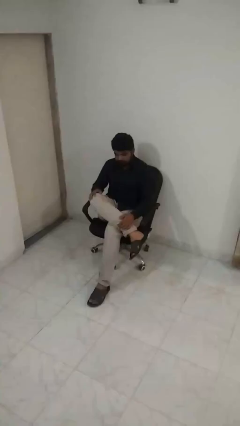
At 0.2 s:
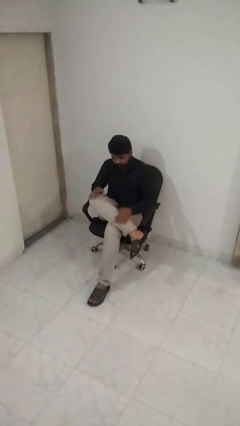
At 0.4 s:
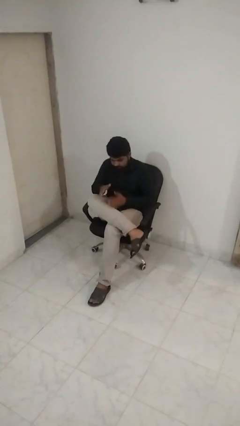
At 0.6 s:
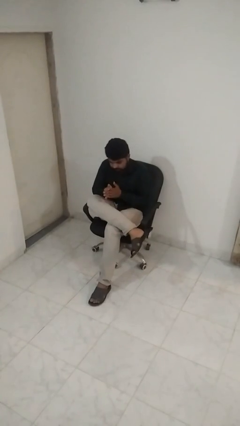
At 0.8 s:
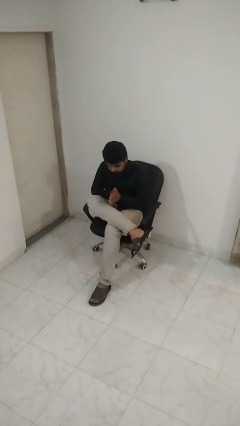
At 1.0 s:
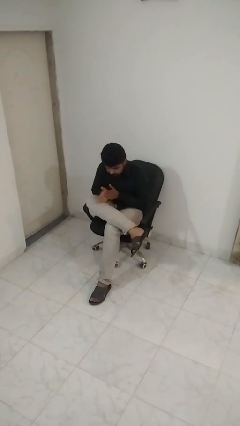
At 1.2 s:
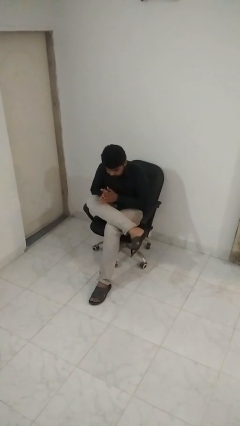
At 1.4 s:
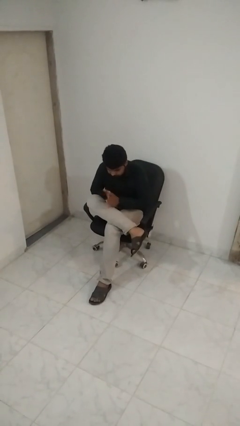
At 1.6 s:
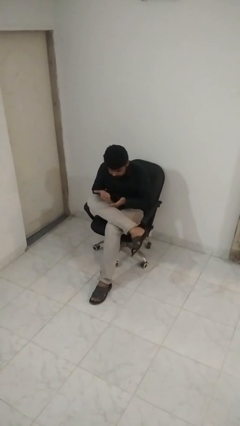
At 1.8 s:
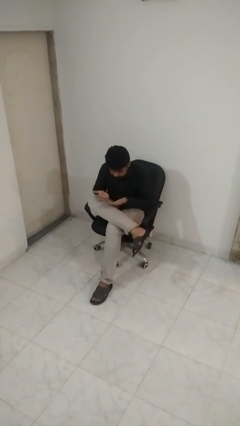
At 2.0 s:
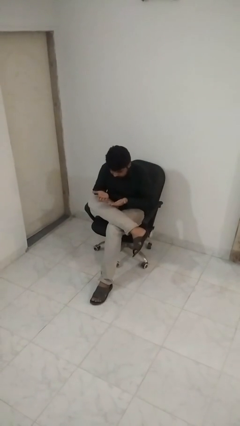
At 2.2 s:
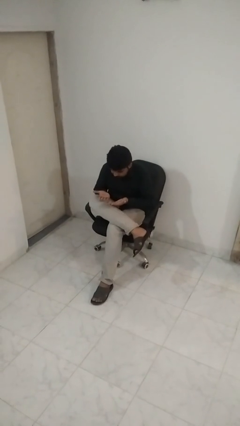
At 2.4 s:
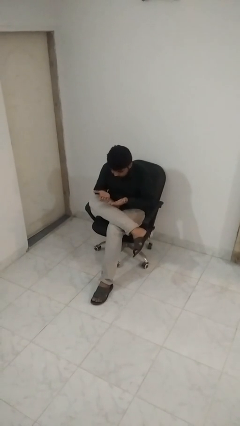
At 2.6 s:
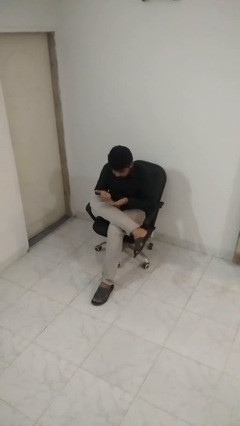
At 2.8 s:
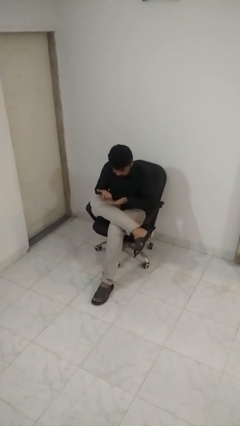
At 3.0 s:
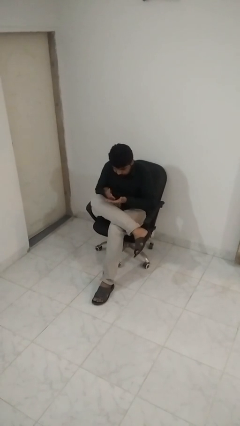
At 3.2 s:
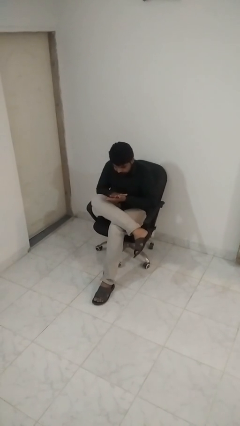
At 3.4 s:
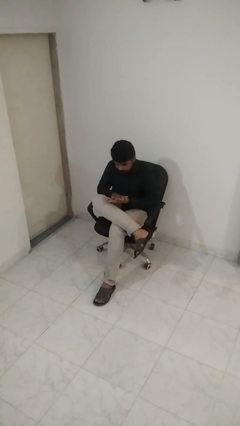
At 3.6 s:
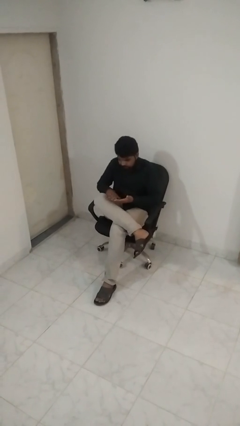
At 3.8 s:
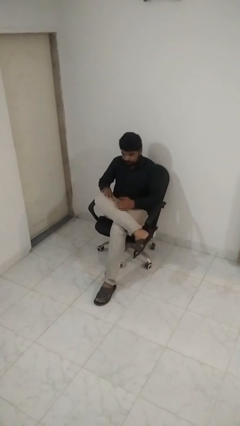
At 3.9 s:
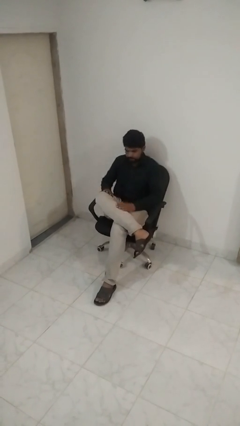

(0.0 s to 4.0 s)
person looks at hands in lap

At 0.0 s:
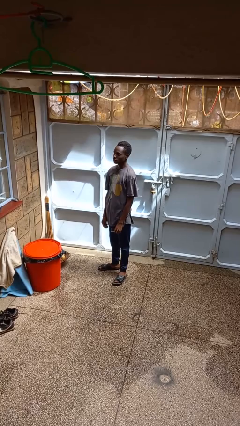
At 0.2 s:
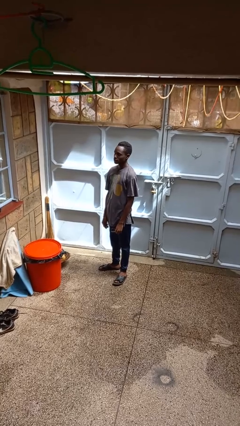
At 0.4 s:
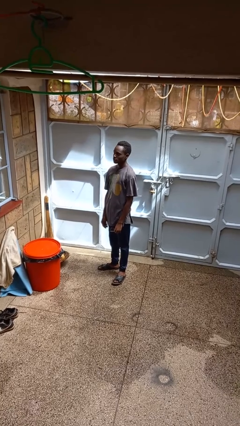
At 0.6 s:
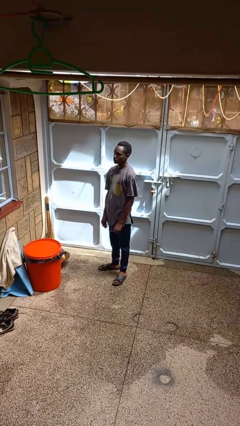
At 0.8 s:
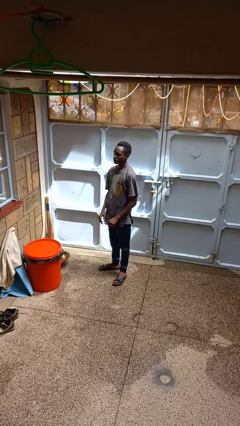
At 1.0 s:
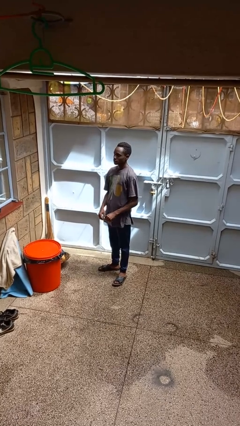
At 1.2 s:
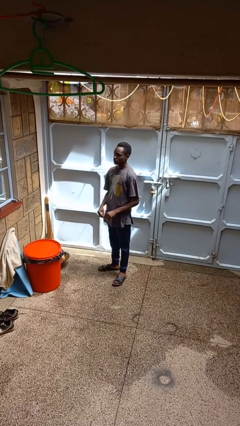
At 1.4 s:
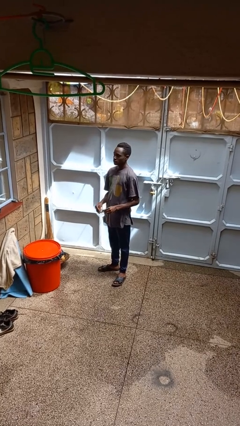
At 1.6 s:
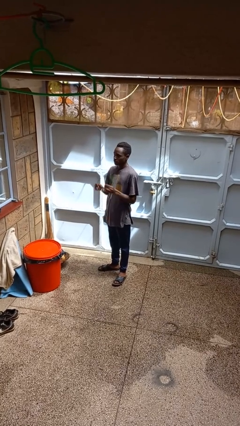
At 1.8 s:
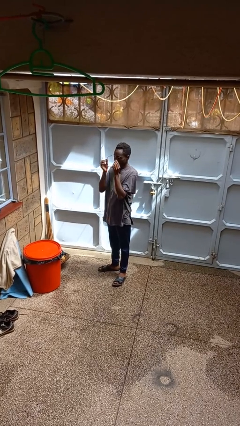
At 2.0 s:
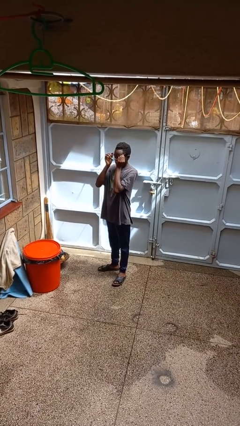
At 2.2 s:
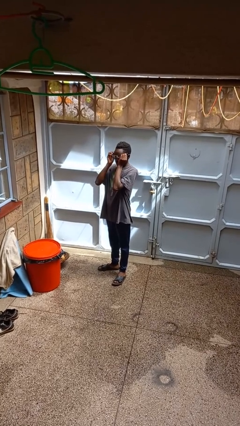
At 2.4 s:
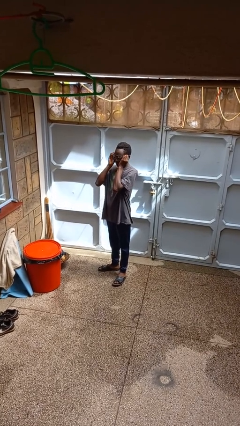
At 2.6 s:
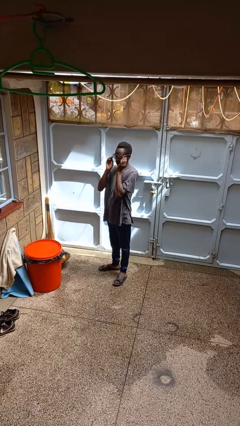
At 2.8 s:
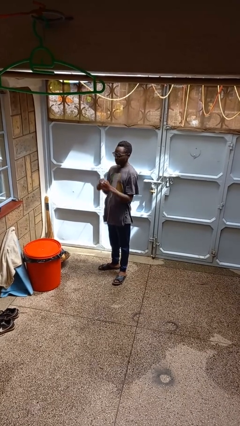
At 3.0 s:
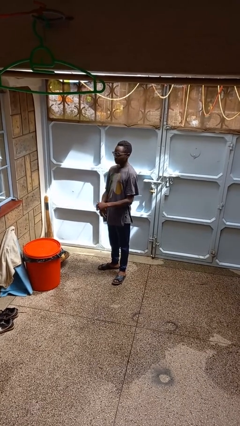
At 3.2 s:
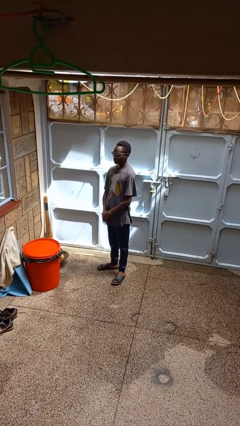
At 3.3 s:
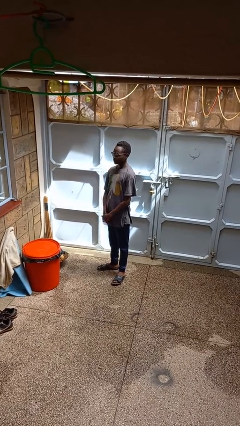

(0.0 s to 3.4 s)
person puts on glasses

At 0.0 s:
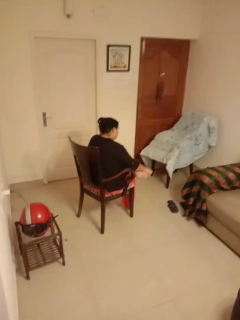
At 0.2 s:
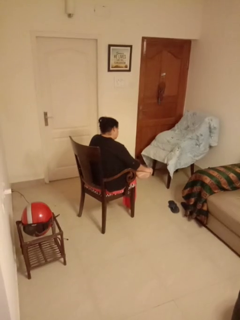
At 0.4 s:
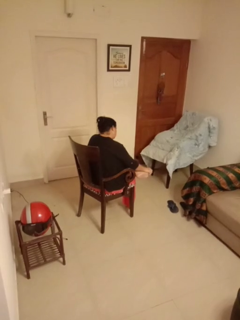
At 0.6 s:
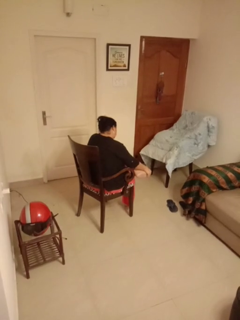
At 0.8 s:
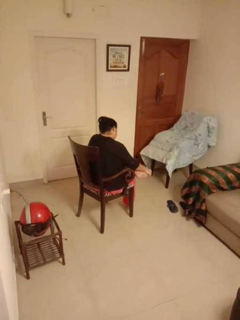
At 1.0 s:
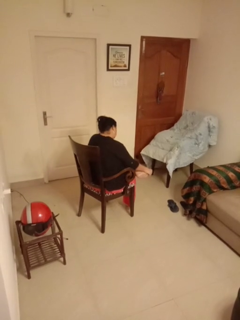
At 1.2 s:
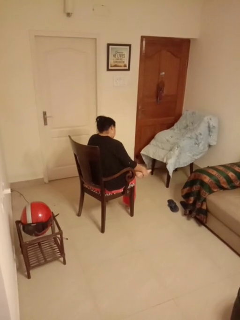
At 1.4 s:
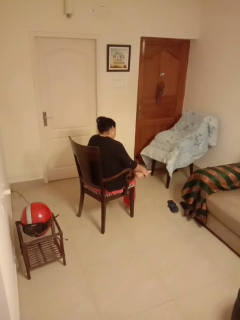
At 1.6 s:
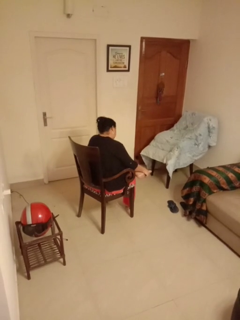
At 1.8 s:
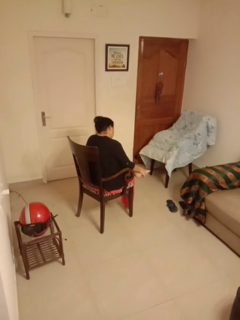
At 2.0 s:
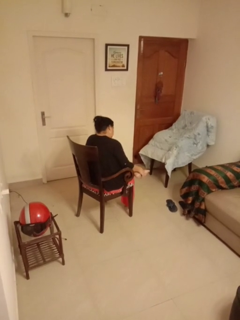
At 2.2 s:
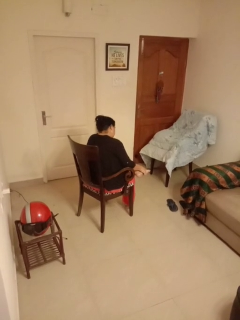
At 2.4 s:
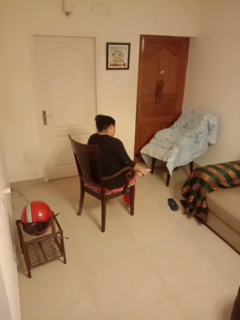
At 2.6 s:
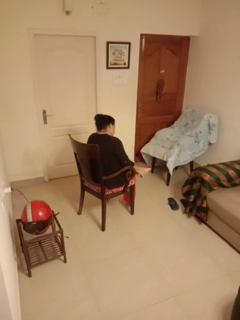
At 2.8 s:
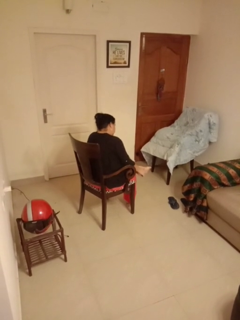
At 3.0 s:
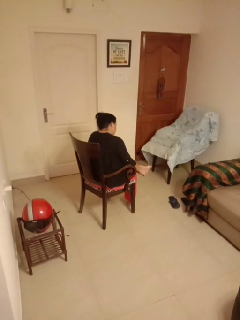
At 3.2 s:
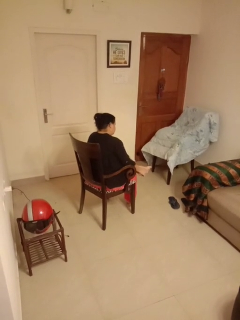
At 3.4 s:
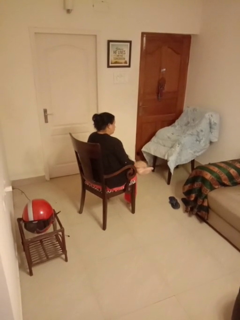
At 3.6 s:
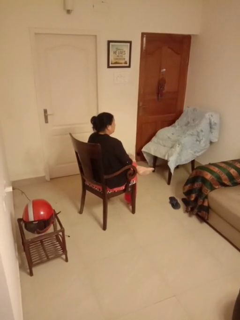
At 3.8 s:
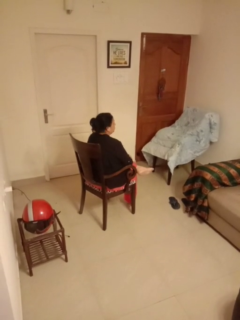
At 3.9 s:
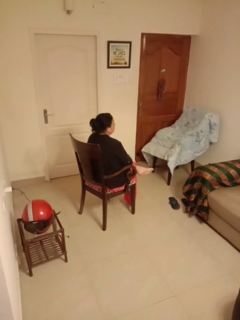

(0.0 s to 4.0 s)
person rubs foot

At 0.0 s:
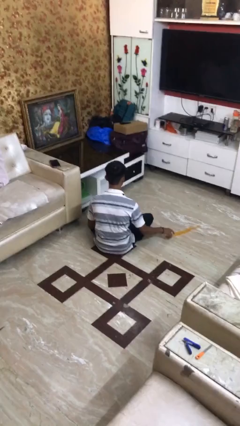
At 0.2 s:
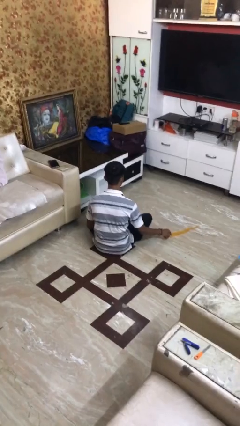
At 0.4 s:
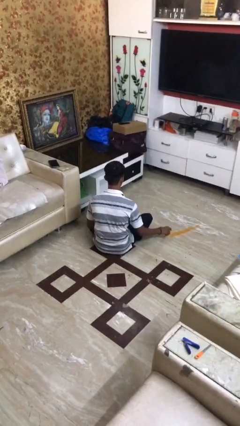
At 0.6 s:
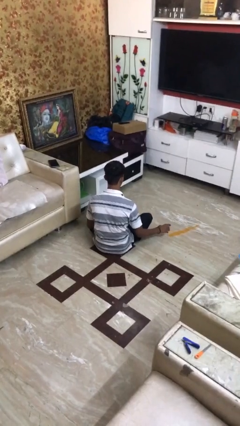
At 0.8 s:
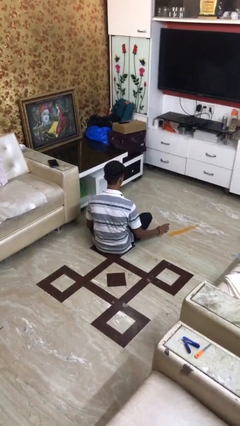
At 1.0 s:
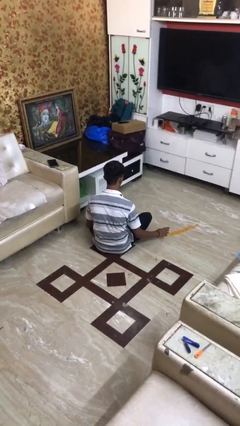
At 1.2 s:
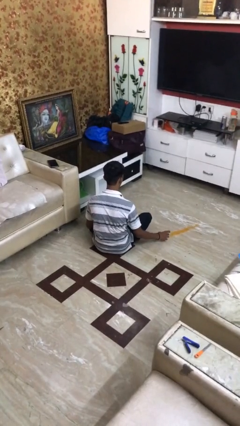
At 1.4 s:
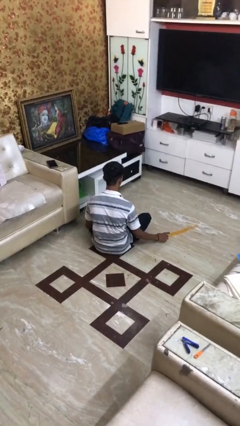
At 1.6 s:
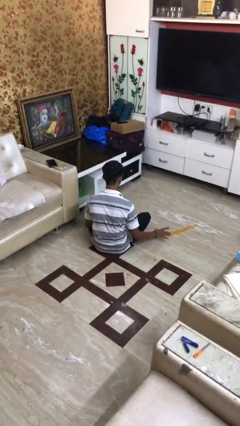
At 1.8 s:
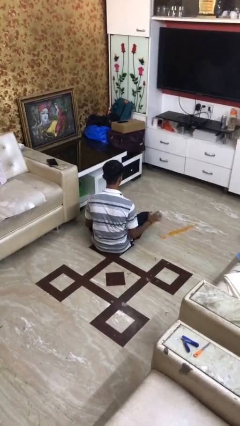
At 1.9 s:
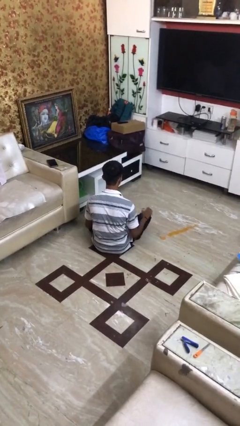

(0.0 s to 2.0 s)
person sets upright glass

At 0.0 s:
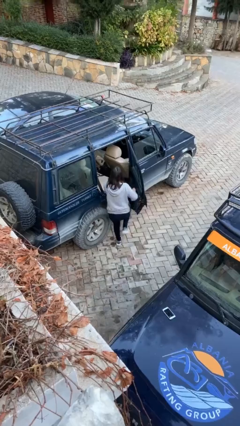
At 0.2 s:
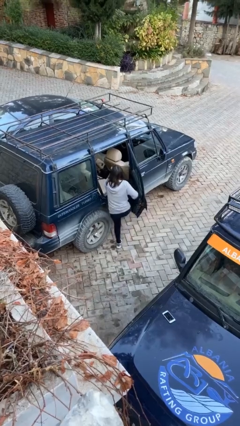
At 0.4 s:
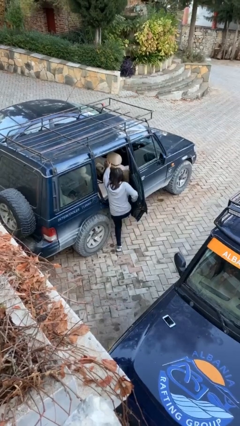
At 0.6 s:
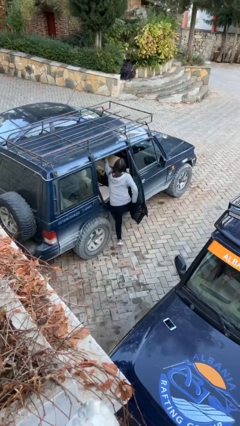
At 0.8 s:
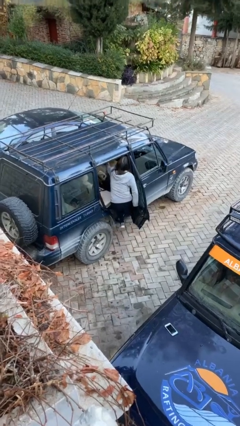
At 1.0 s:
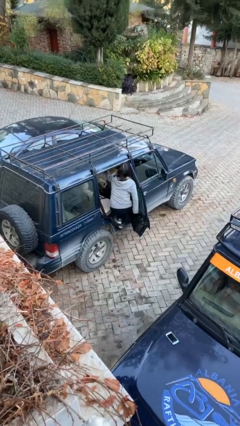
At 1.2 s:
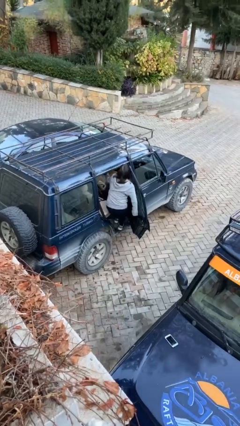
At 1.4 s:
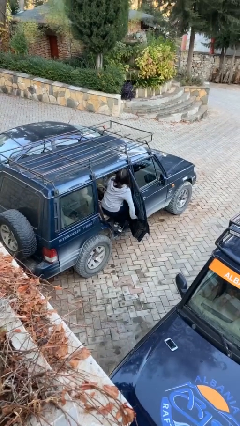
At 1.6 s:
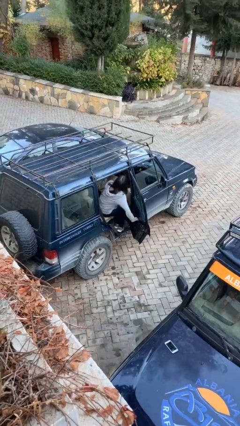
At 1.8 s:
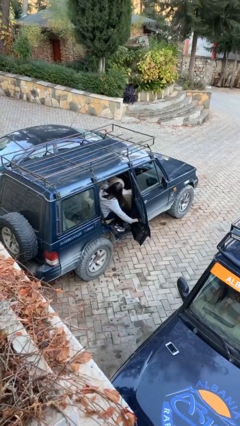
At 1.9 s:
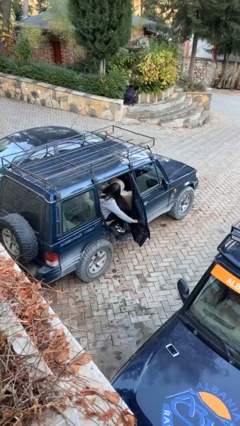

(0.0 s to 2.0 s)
person enters car

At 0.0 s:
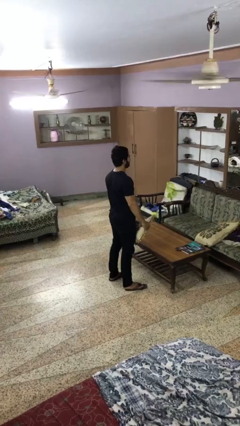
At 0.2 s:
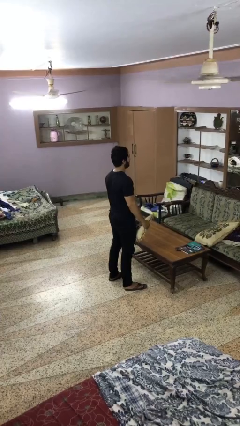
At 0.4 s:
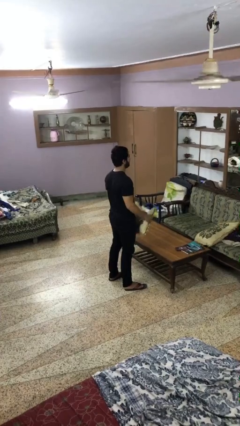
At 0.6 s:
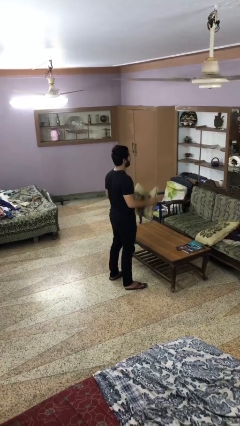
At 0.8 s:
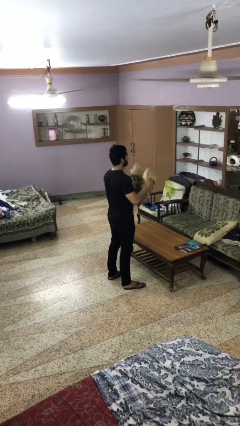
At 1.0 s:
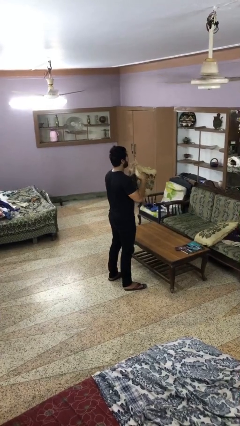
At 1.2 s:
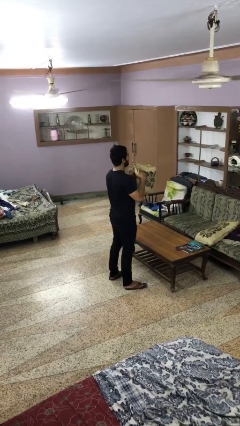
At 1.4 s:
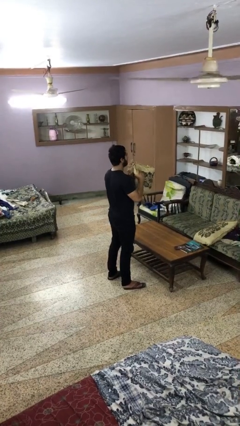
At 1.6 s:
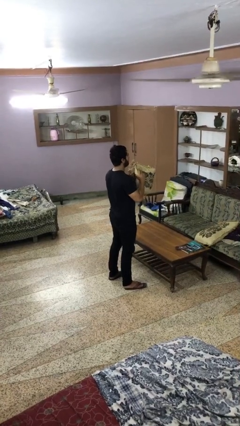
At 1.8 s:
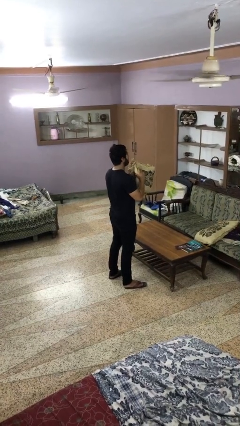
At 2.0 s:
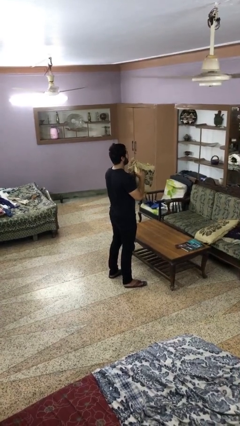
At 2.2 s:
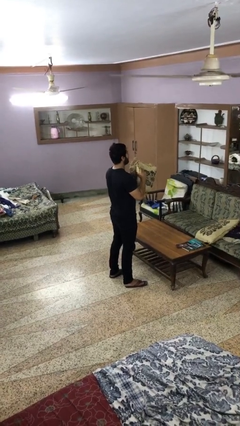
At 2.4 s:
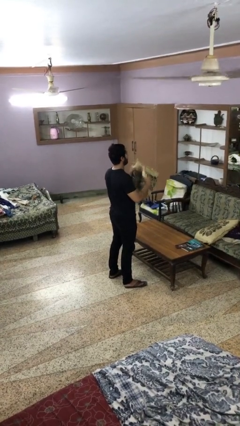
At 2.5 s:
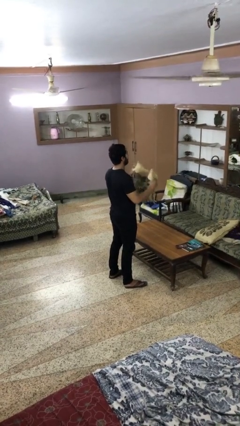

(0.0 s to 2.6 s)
person squeezes object
